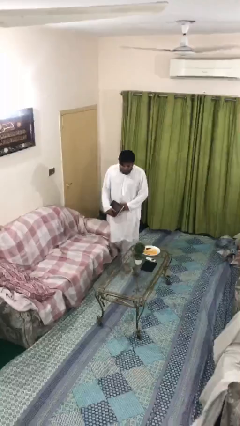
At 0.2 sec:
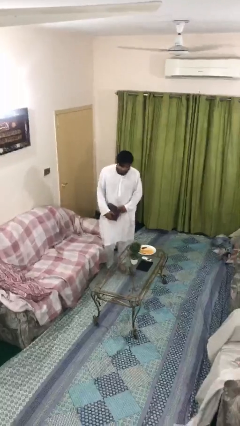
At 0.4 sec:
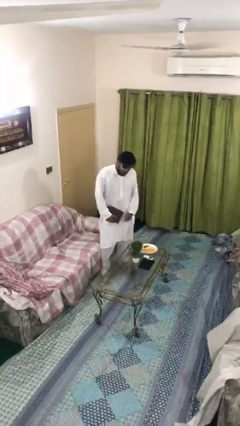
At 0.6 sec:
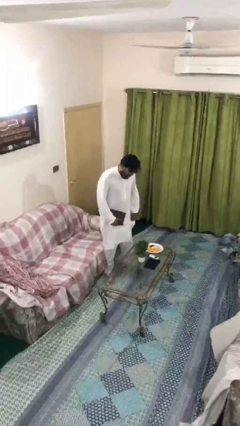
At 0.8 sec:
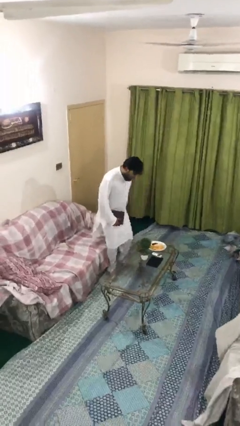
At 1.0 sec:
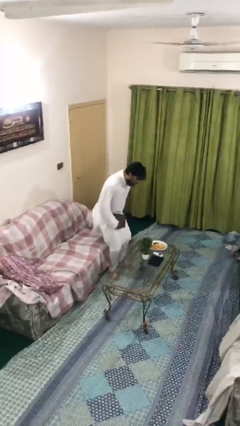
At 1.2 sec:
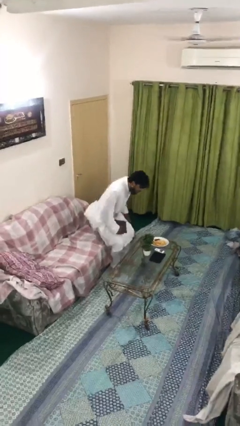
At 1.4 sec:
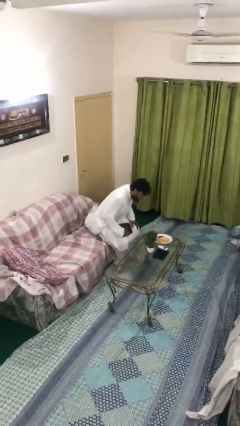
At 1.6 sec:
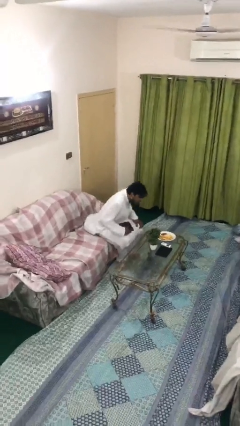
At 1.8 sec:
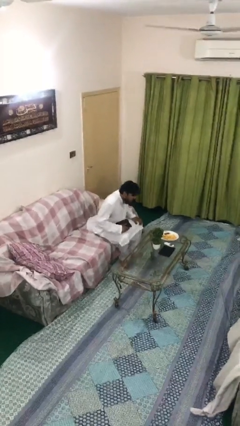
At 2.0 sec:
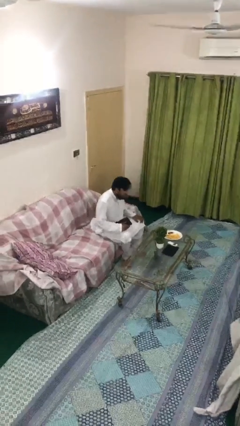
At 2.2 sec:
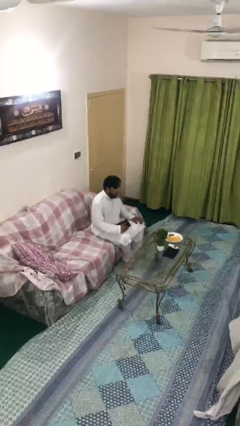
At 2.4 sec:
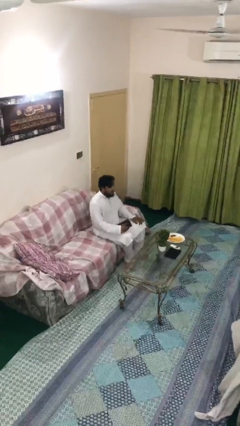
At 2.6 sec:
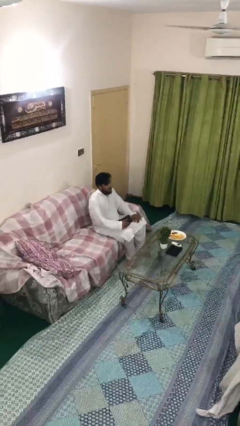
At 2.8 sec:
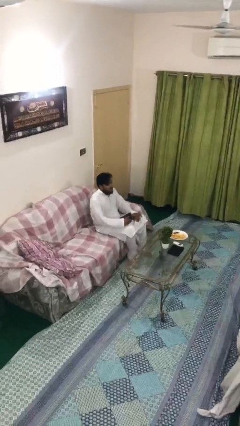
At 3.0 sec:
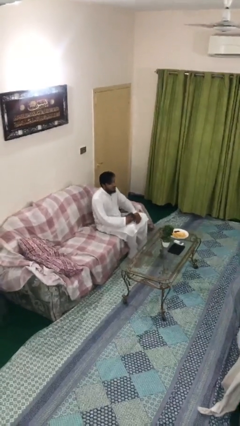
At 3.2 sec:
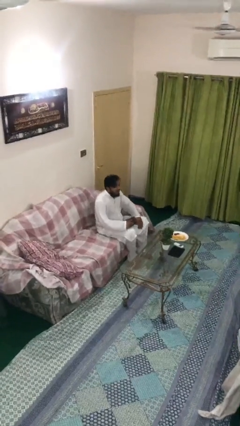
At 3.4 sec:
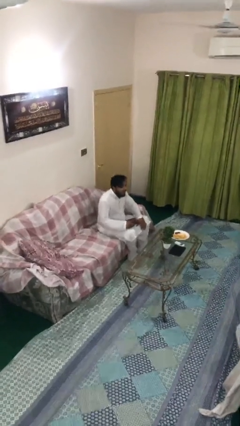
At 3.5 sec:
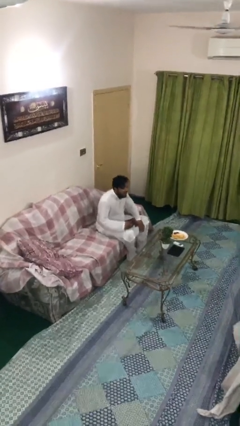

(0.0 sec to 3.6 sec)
person sits down

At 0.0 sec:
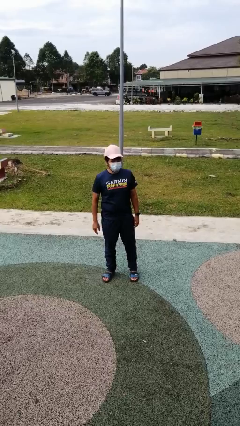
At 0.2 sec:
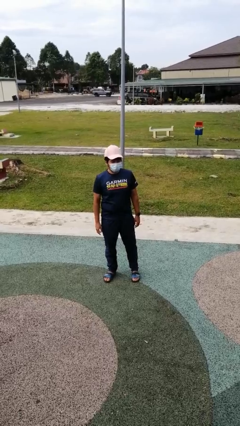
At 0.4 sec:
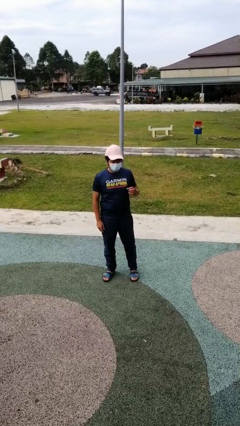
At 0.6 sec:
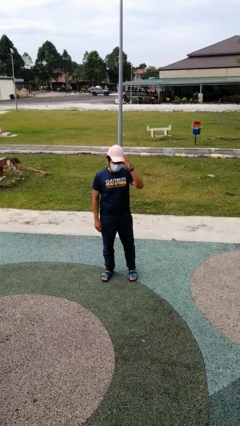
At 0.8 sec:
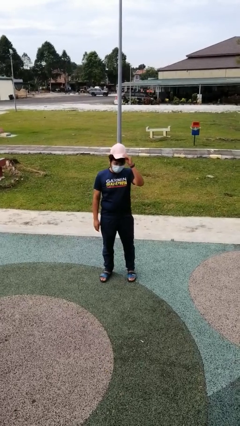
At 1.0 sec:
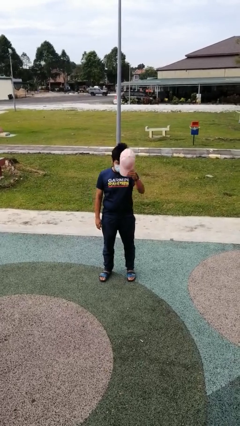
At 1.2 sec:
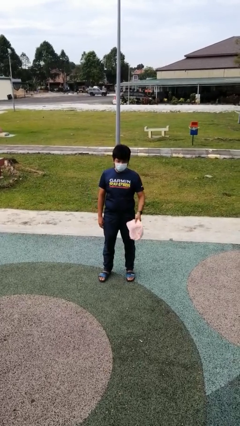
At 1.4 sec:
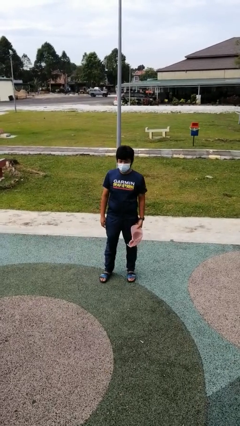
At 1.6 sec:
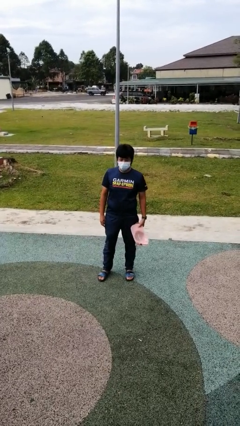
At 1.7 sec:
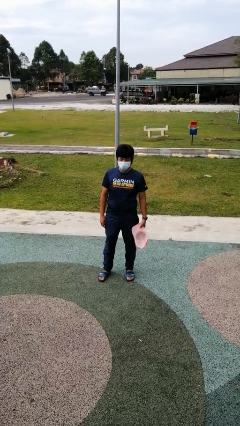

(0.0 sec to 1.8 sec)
person takes off hat

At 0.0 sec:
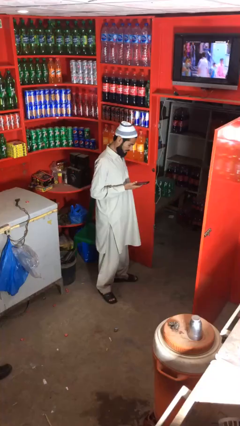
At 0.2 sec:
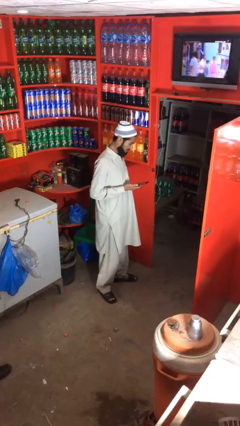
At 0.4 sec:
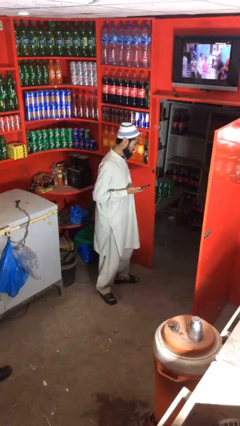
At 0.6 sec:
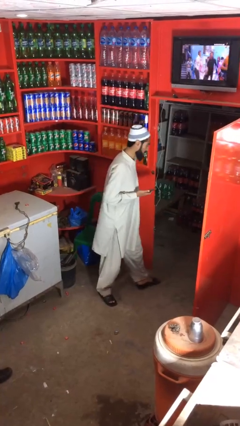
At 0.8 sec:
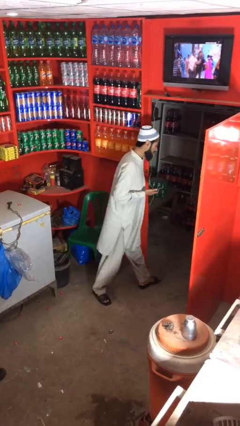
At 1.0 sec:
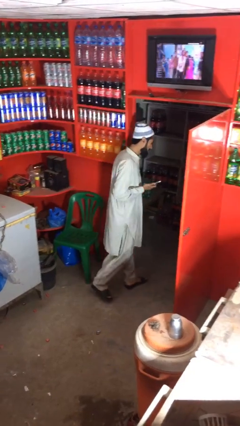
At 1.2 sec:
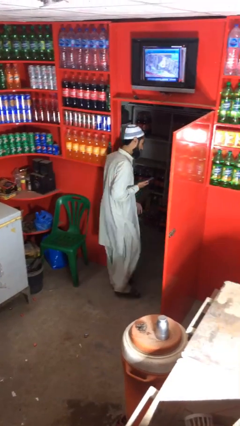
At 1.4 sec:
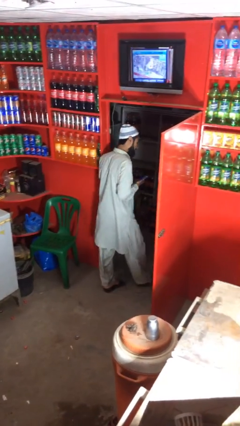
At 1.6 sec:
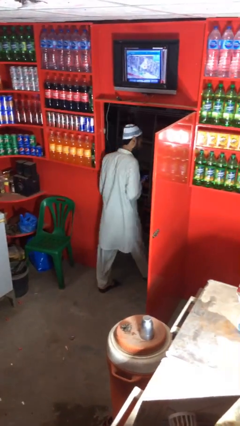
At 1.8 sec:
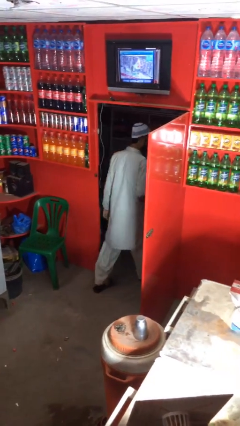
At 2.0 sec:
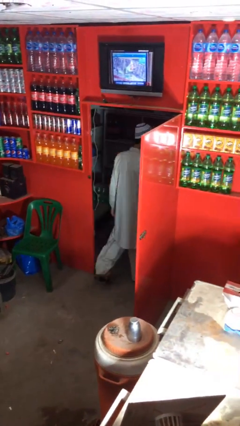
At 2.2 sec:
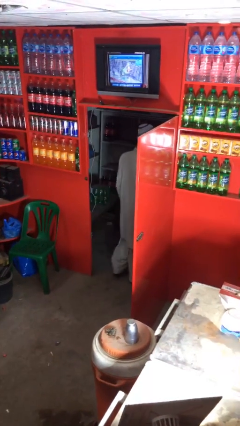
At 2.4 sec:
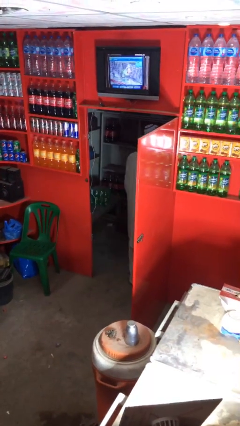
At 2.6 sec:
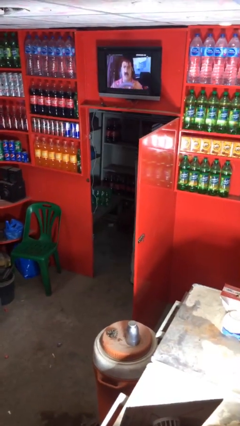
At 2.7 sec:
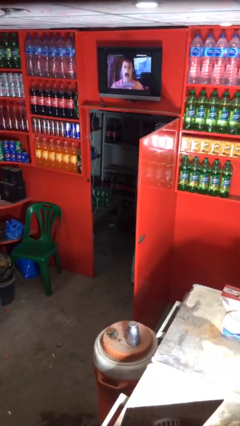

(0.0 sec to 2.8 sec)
person enters scene through structure

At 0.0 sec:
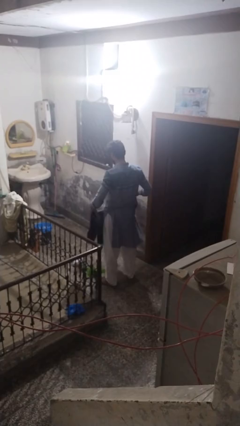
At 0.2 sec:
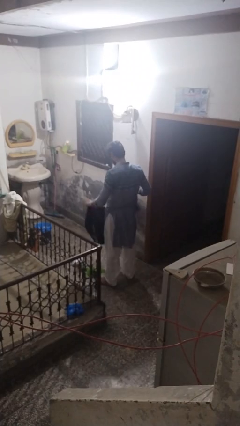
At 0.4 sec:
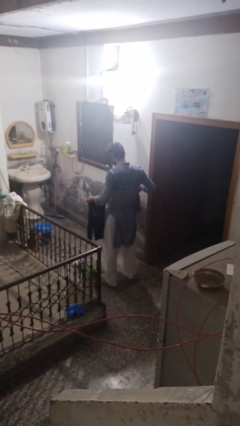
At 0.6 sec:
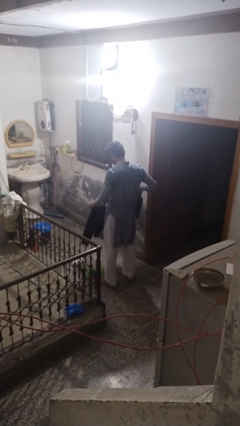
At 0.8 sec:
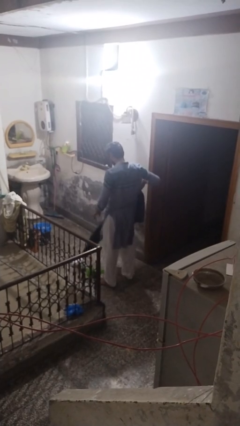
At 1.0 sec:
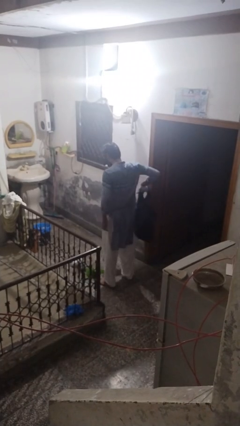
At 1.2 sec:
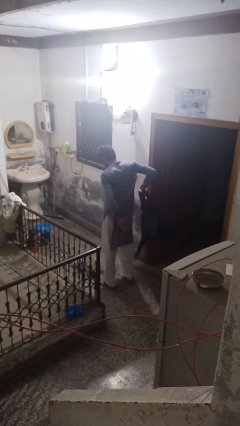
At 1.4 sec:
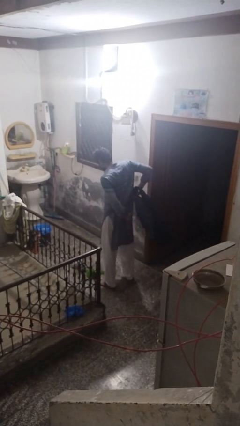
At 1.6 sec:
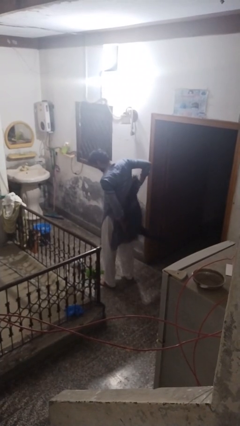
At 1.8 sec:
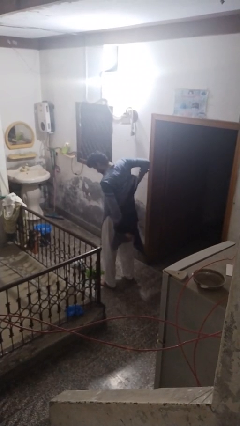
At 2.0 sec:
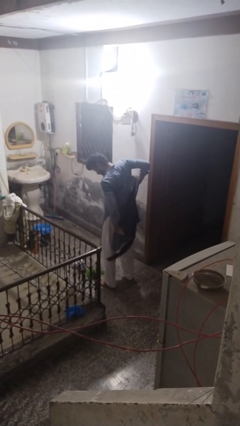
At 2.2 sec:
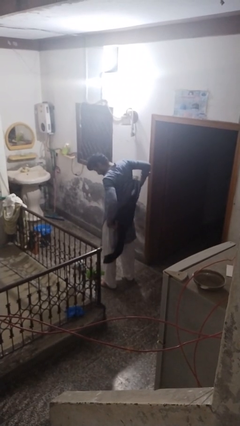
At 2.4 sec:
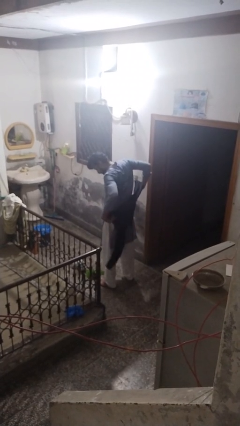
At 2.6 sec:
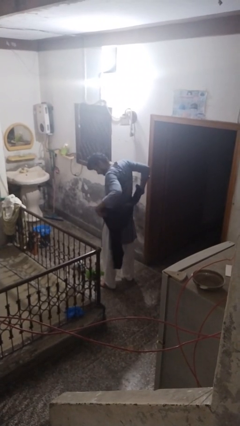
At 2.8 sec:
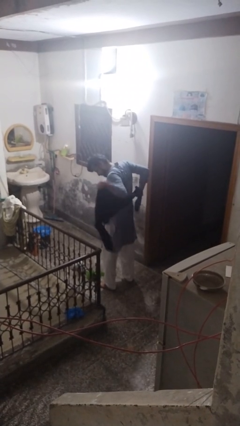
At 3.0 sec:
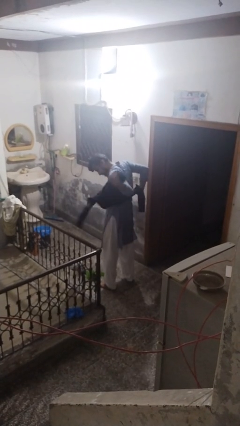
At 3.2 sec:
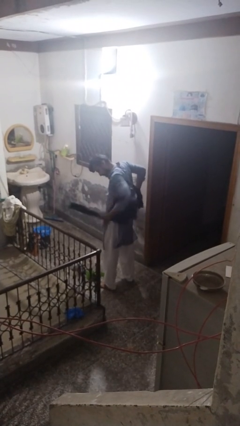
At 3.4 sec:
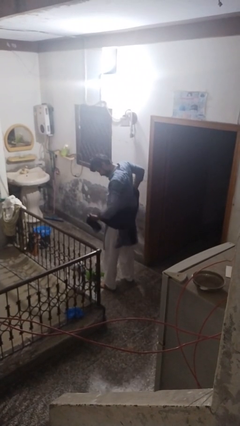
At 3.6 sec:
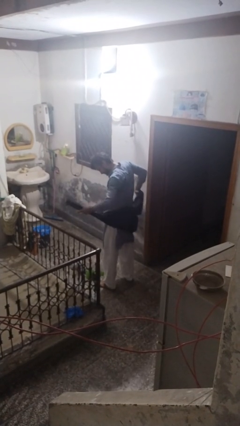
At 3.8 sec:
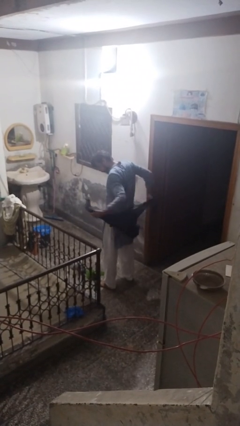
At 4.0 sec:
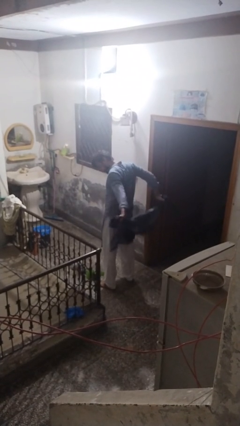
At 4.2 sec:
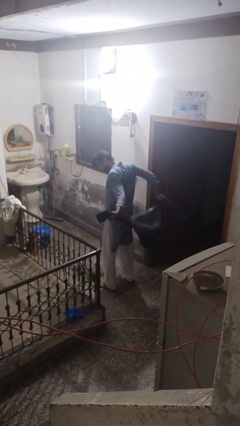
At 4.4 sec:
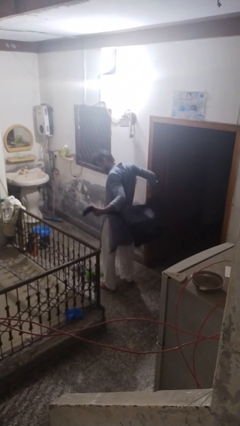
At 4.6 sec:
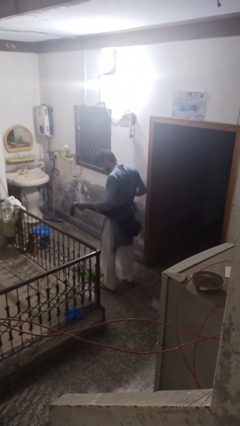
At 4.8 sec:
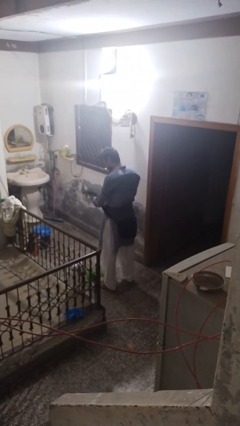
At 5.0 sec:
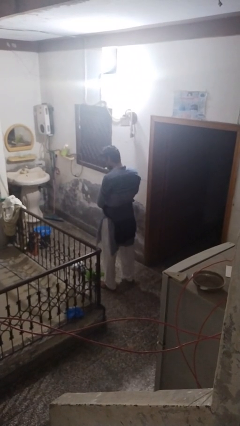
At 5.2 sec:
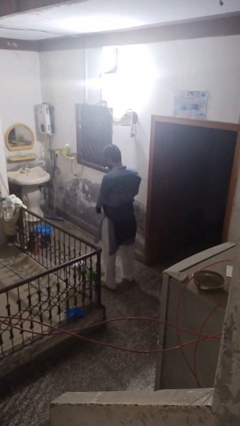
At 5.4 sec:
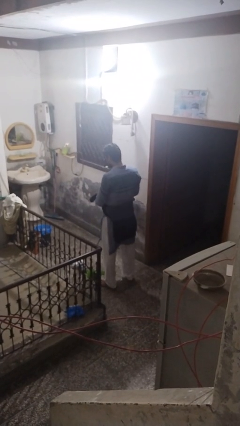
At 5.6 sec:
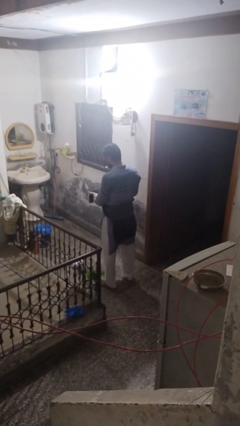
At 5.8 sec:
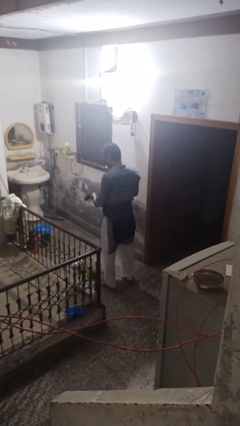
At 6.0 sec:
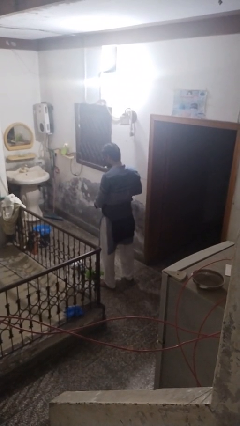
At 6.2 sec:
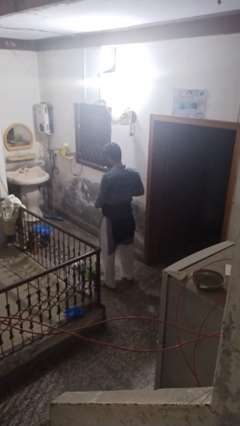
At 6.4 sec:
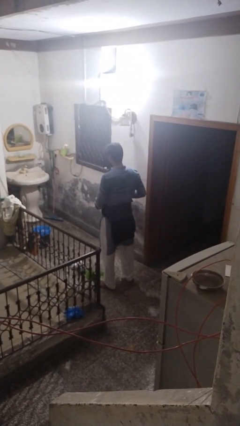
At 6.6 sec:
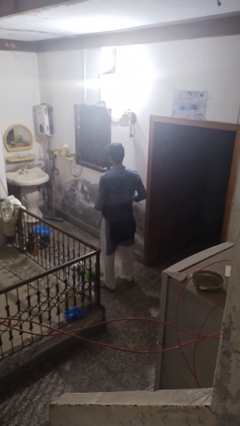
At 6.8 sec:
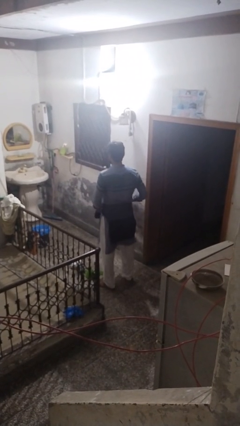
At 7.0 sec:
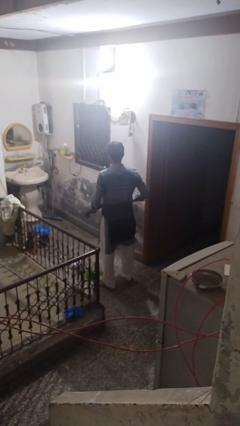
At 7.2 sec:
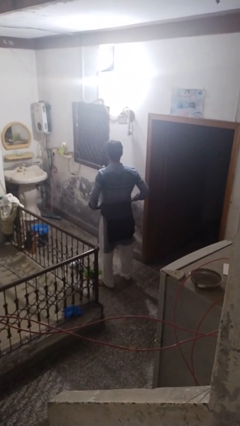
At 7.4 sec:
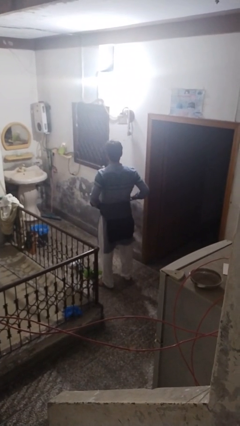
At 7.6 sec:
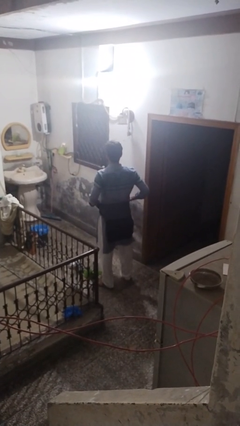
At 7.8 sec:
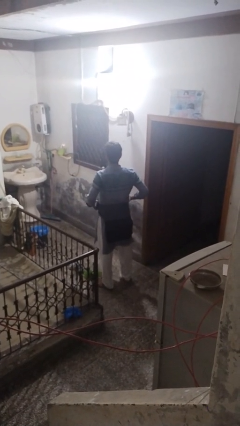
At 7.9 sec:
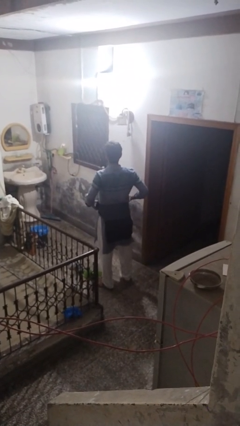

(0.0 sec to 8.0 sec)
person ties jacket around waist

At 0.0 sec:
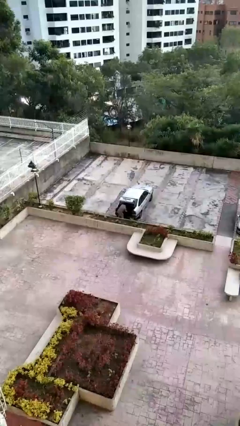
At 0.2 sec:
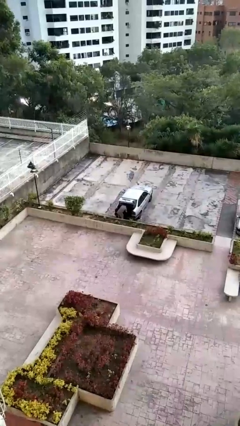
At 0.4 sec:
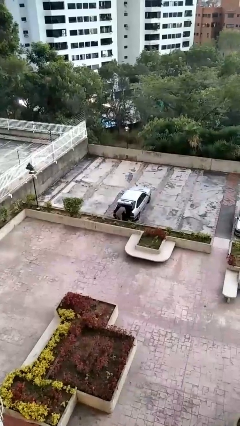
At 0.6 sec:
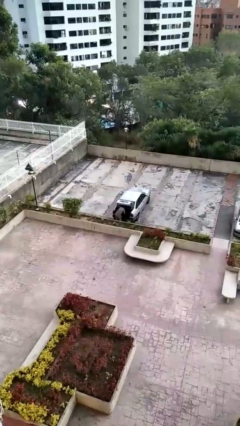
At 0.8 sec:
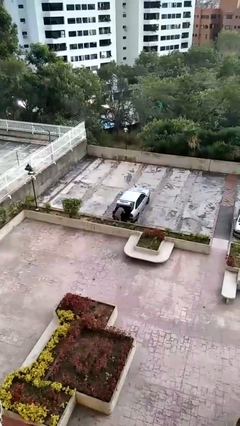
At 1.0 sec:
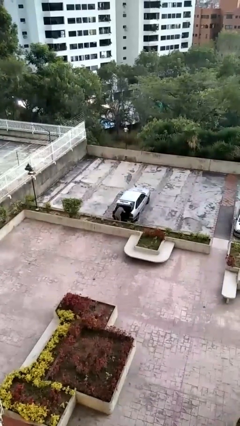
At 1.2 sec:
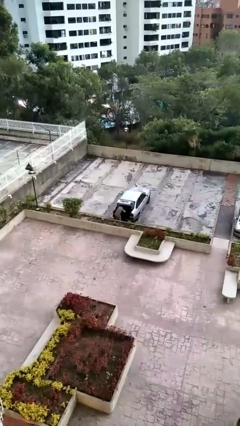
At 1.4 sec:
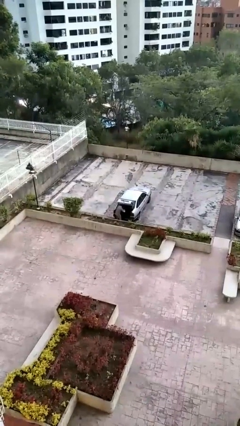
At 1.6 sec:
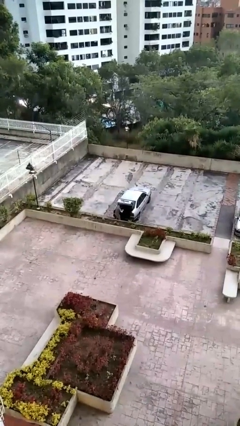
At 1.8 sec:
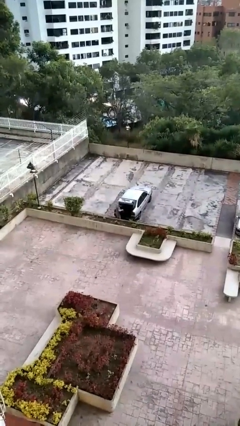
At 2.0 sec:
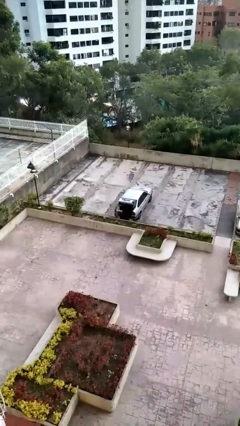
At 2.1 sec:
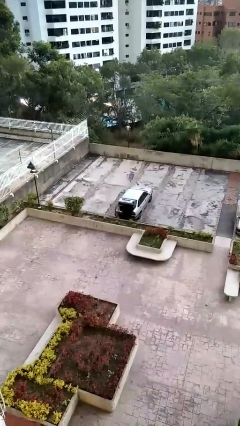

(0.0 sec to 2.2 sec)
person unloads car
